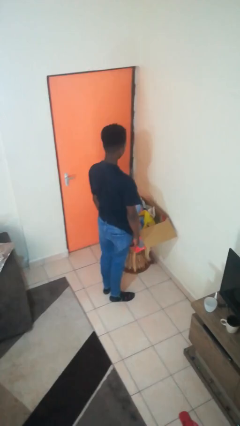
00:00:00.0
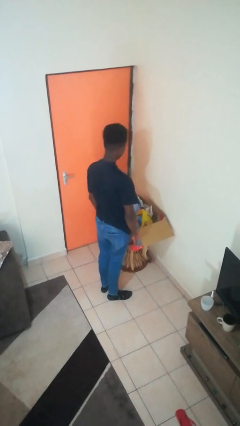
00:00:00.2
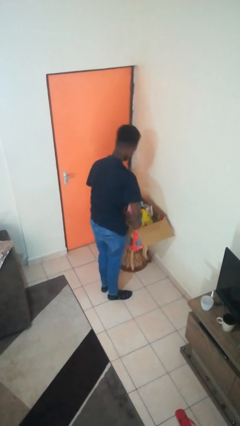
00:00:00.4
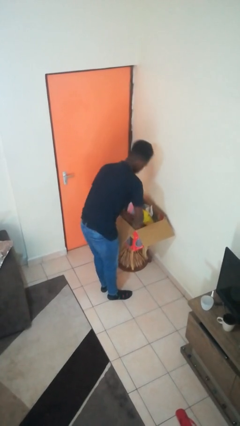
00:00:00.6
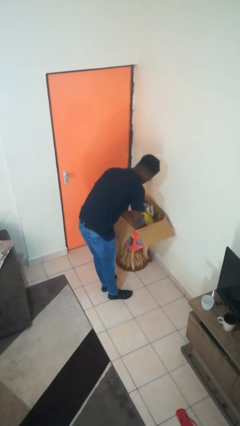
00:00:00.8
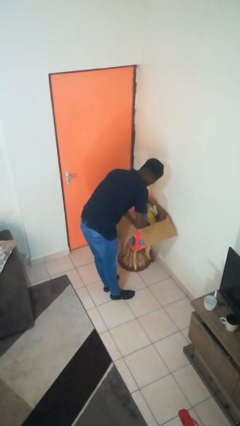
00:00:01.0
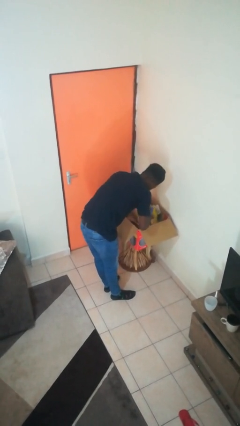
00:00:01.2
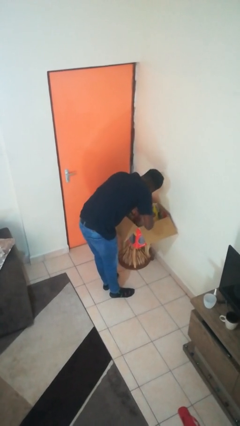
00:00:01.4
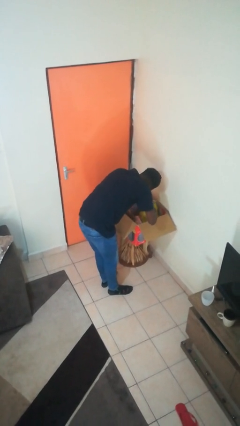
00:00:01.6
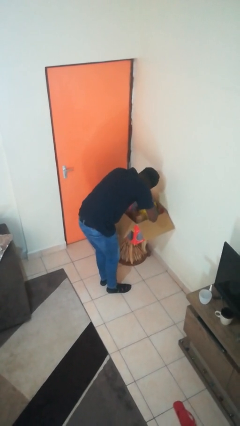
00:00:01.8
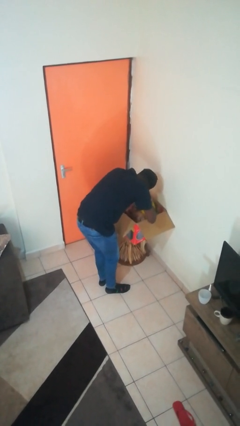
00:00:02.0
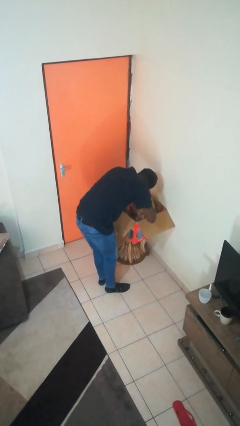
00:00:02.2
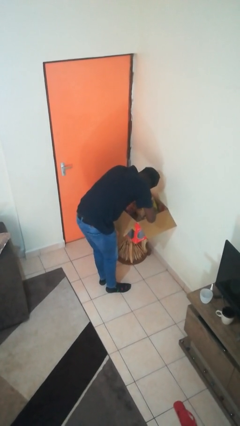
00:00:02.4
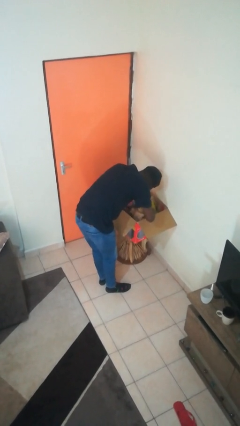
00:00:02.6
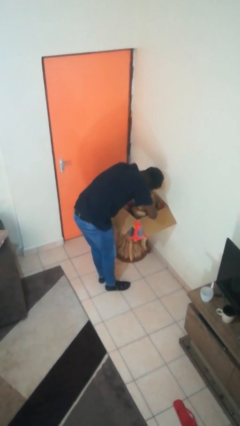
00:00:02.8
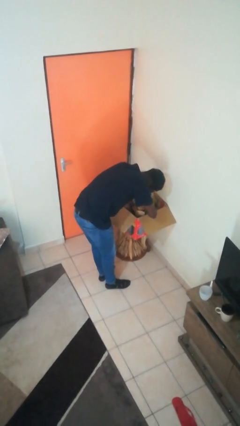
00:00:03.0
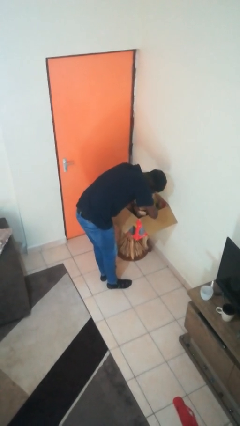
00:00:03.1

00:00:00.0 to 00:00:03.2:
person searches in box

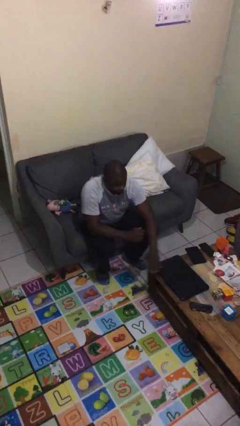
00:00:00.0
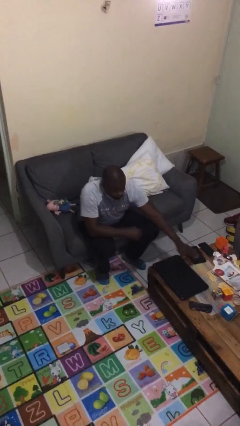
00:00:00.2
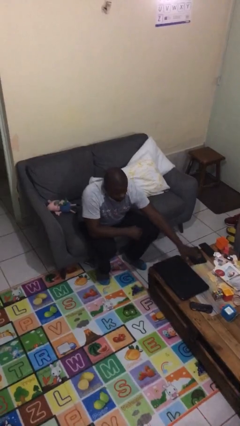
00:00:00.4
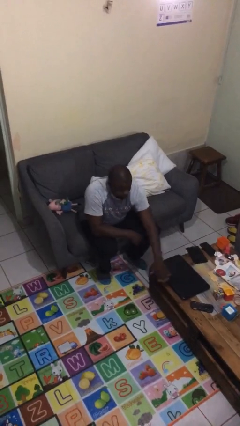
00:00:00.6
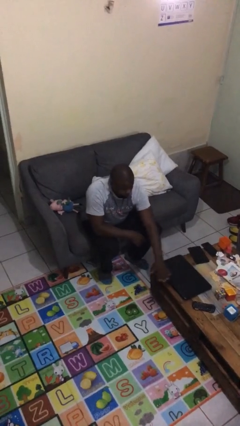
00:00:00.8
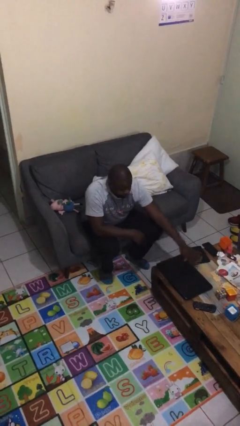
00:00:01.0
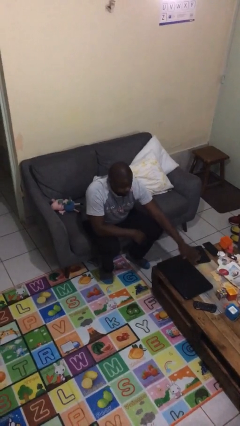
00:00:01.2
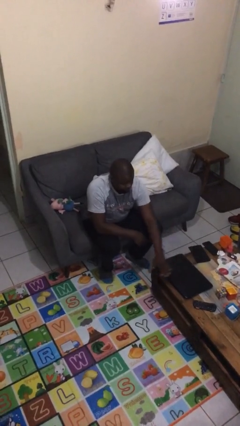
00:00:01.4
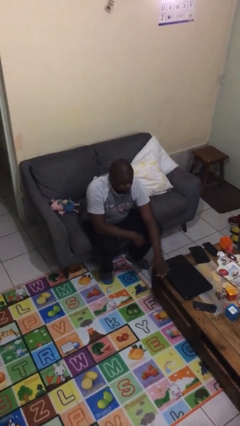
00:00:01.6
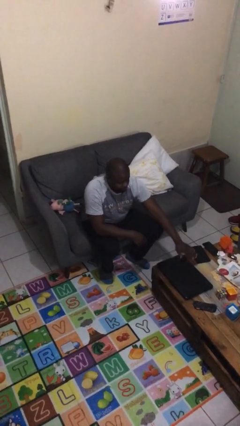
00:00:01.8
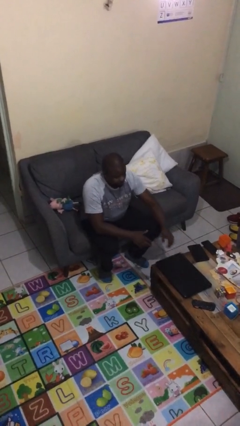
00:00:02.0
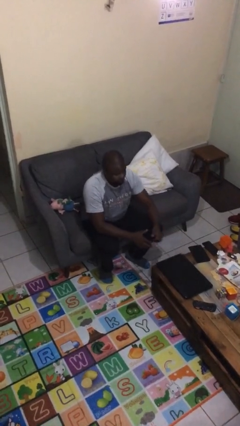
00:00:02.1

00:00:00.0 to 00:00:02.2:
person waves hand over object

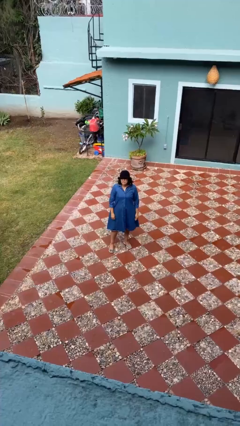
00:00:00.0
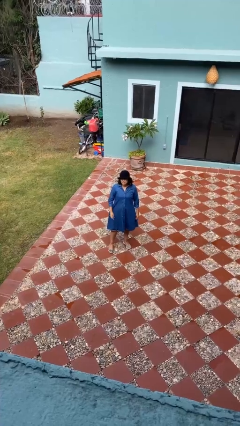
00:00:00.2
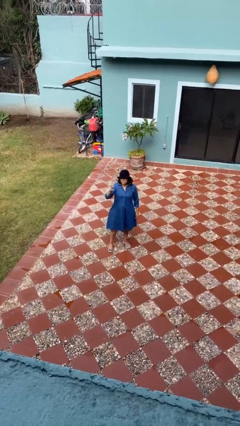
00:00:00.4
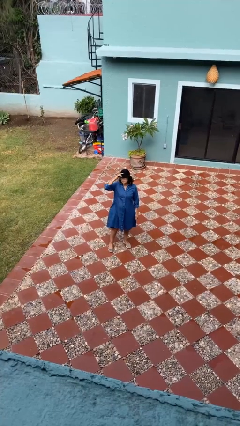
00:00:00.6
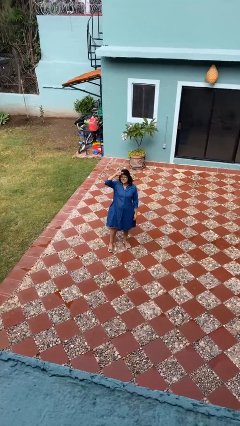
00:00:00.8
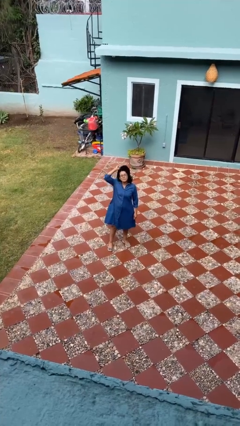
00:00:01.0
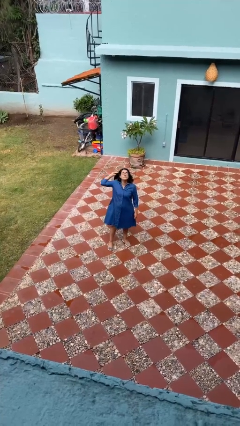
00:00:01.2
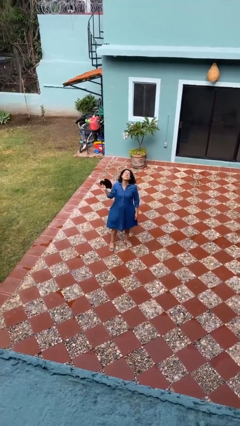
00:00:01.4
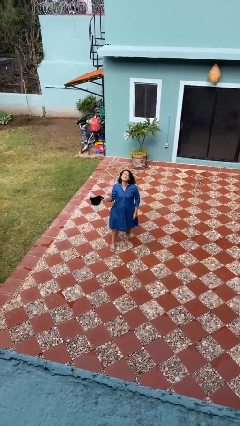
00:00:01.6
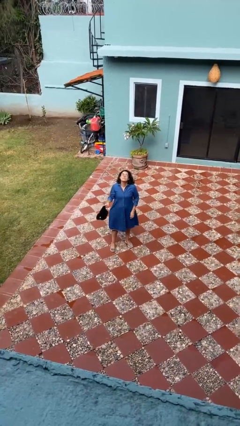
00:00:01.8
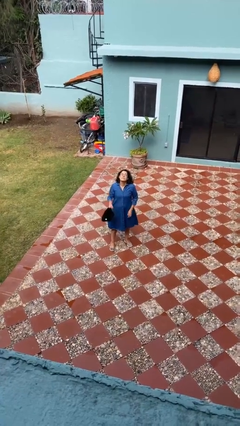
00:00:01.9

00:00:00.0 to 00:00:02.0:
person takes off hat

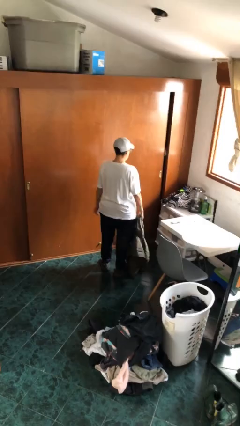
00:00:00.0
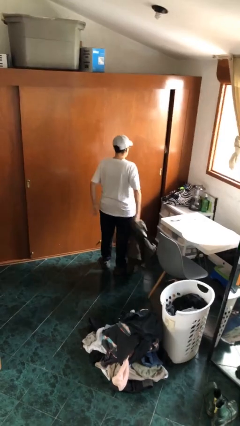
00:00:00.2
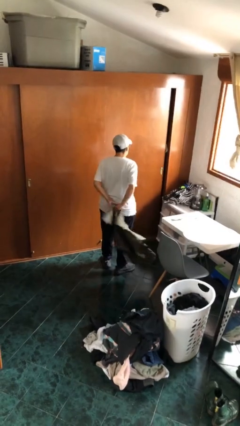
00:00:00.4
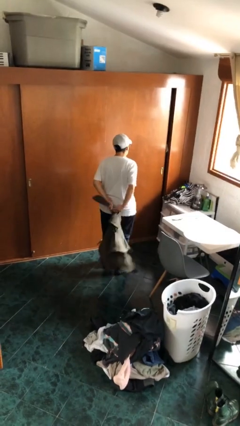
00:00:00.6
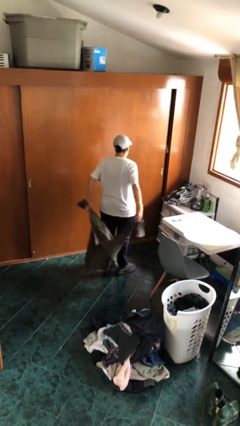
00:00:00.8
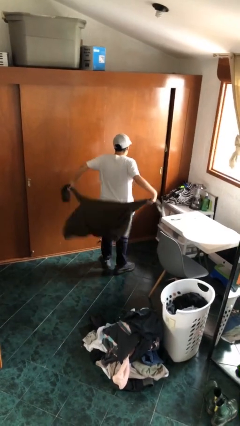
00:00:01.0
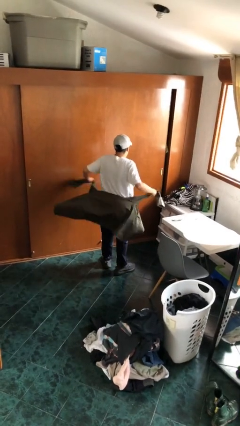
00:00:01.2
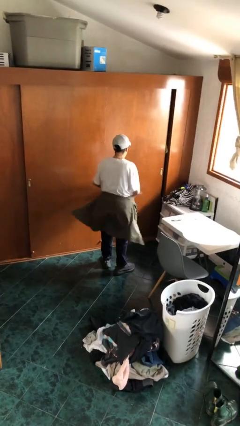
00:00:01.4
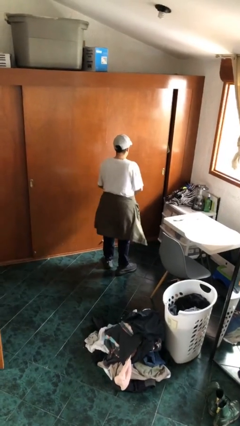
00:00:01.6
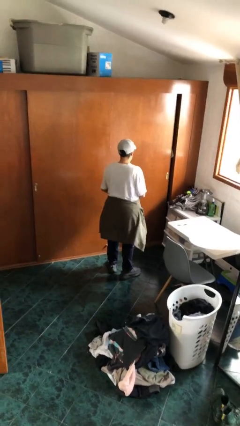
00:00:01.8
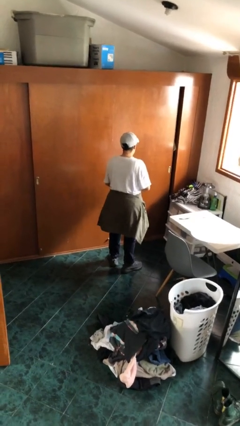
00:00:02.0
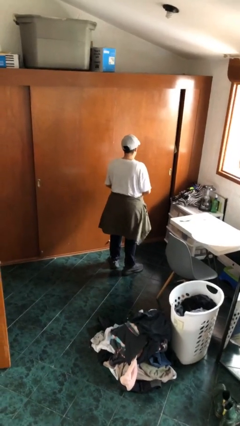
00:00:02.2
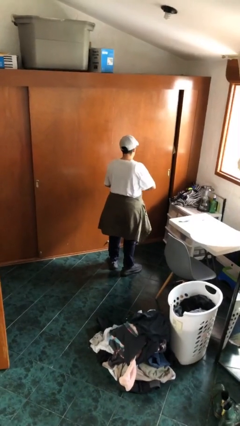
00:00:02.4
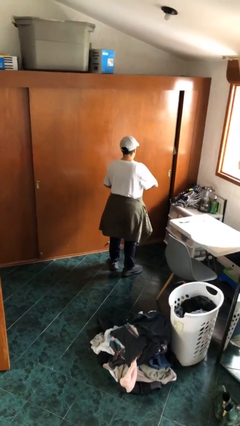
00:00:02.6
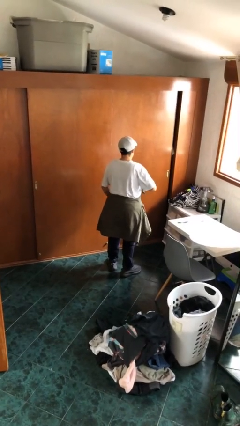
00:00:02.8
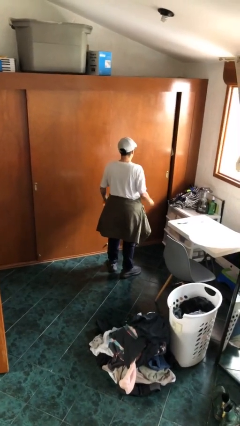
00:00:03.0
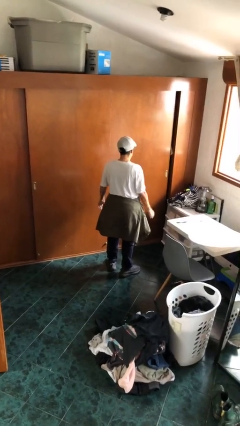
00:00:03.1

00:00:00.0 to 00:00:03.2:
person ties jacket around waist

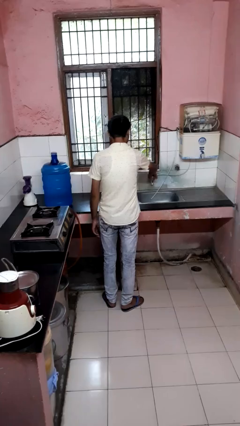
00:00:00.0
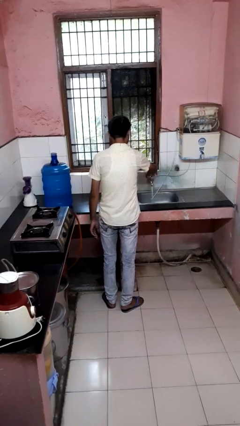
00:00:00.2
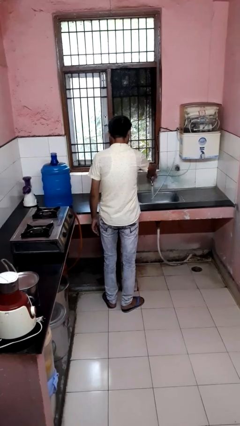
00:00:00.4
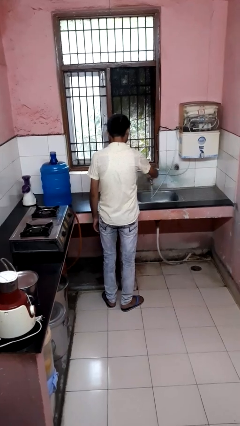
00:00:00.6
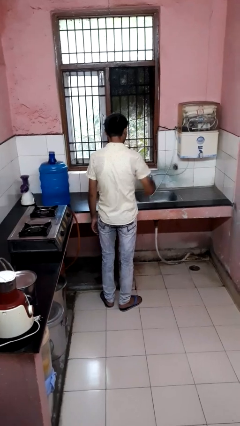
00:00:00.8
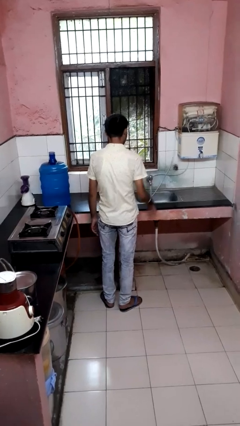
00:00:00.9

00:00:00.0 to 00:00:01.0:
person turns on faucet

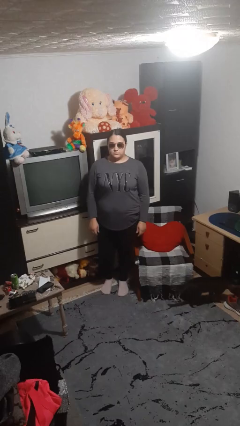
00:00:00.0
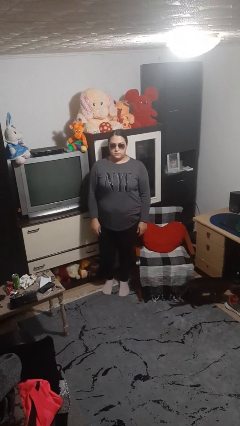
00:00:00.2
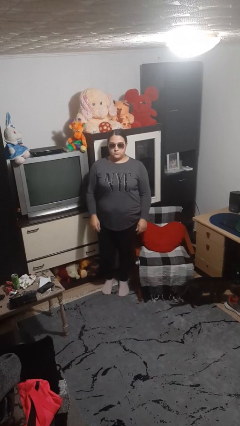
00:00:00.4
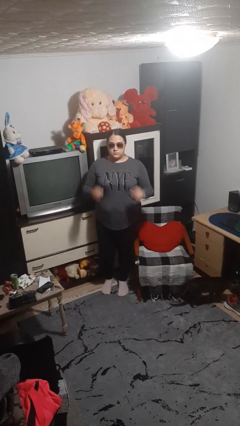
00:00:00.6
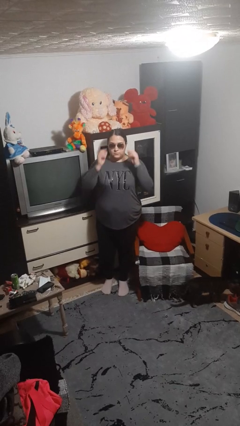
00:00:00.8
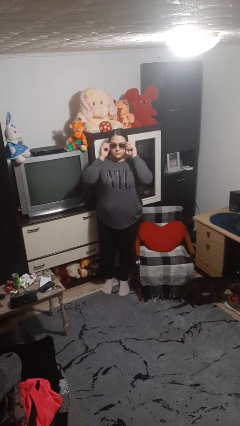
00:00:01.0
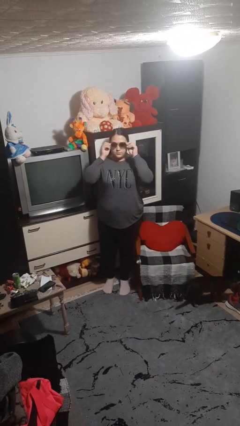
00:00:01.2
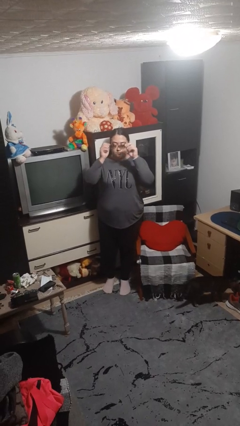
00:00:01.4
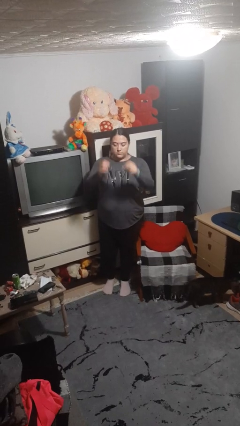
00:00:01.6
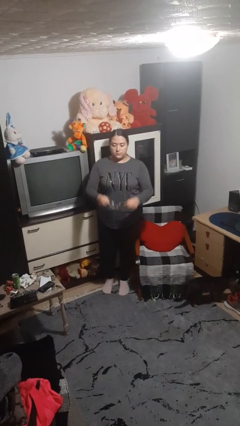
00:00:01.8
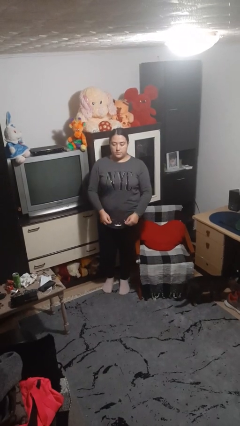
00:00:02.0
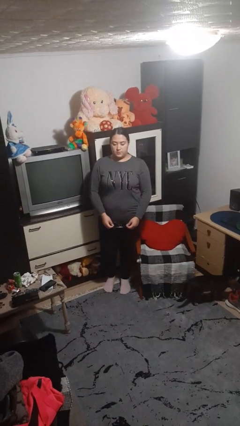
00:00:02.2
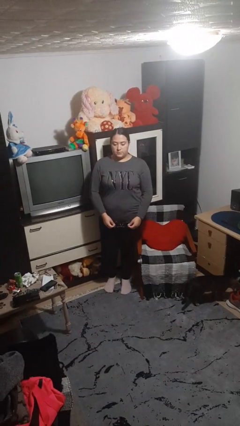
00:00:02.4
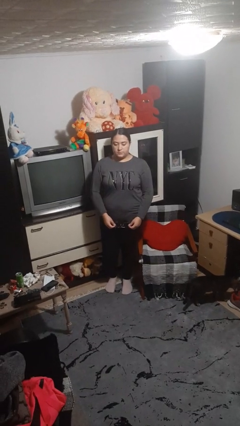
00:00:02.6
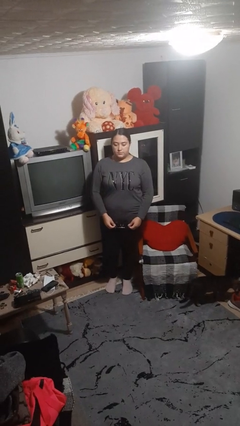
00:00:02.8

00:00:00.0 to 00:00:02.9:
person takes off sunglasses

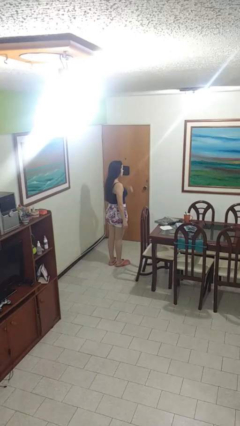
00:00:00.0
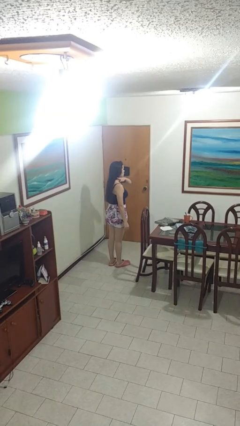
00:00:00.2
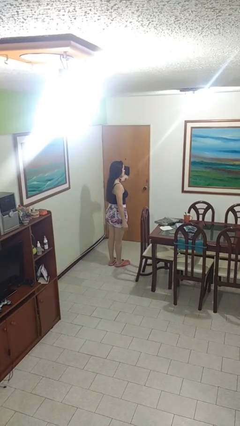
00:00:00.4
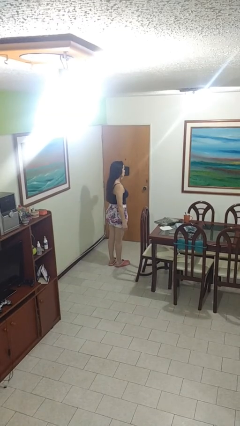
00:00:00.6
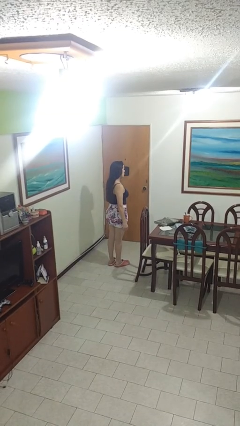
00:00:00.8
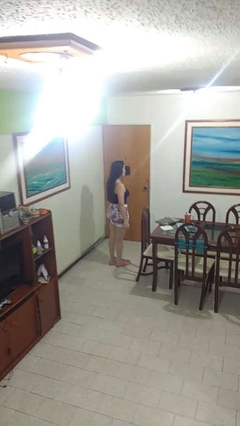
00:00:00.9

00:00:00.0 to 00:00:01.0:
person gestures cut

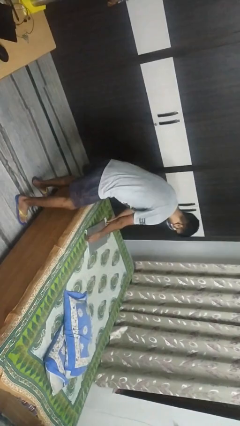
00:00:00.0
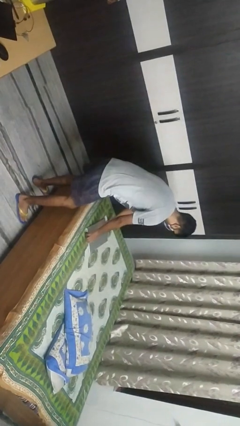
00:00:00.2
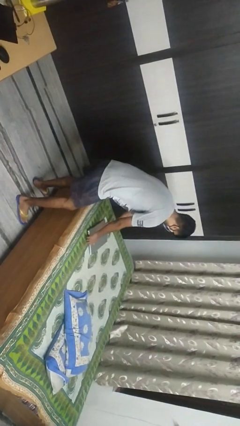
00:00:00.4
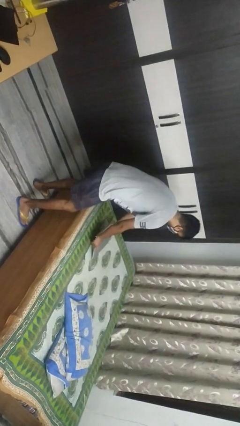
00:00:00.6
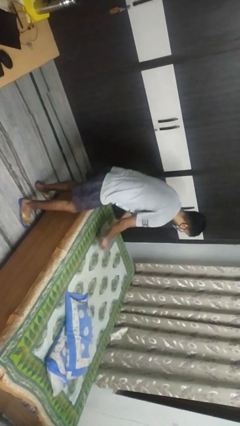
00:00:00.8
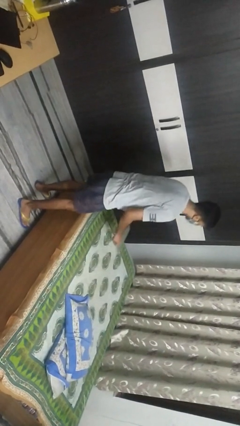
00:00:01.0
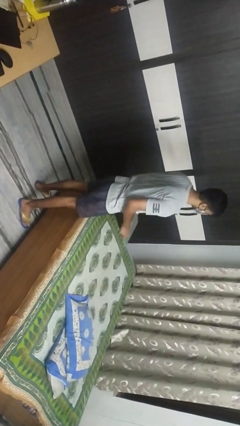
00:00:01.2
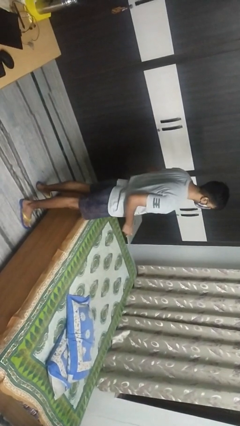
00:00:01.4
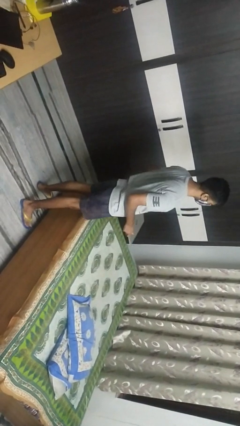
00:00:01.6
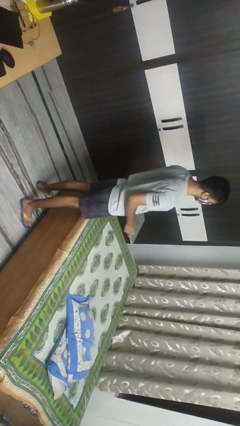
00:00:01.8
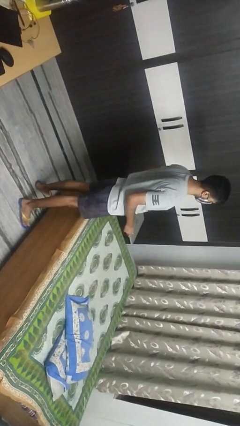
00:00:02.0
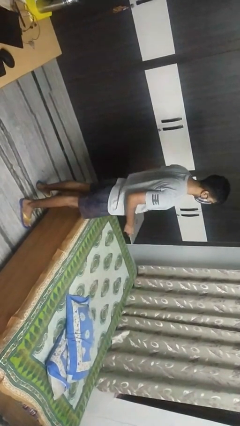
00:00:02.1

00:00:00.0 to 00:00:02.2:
person picks up object from bed
